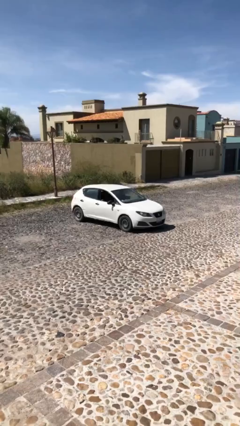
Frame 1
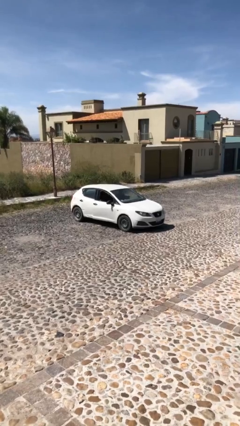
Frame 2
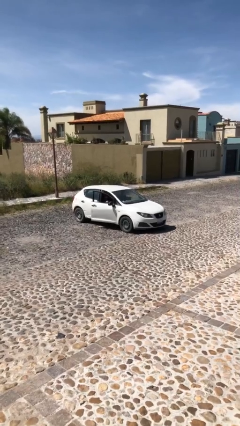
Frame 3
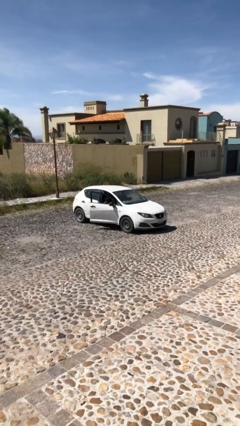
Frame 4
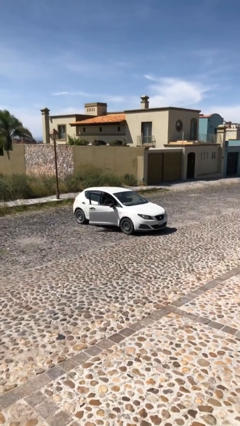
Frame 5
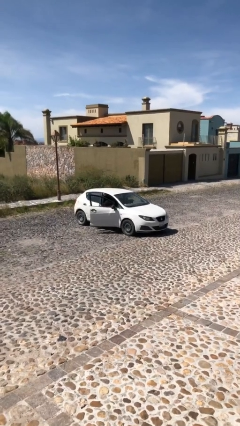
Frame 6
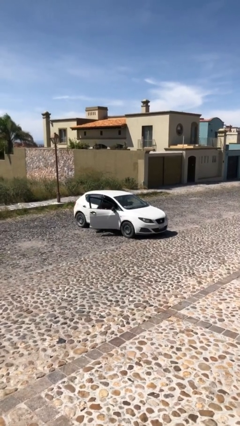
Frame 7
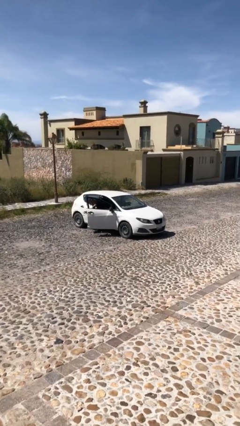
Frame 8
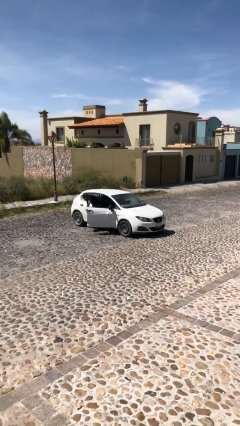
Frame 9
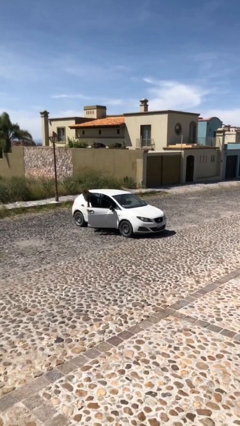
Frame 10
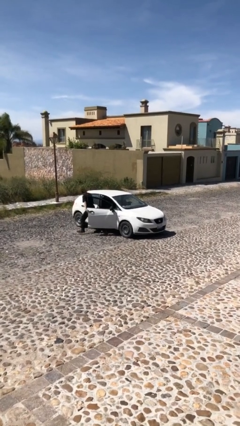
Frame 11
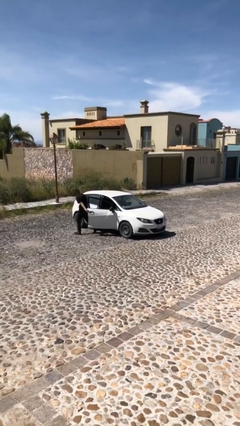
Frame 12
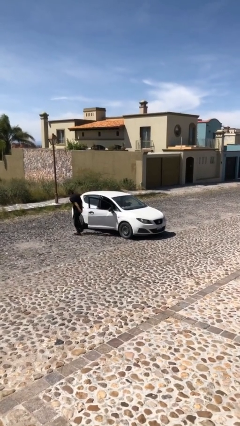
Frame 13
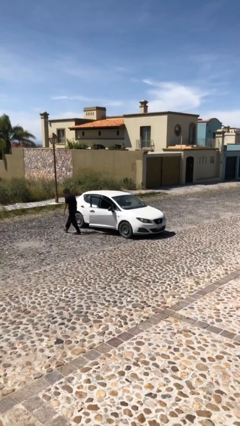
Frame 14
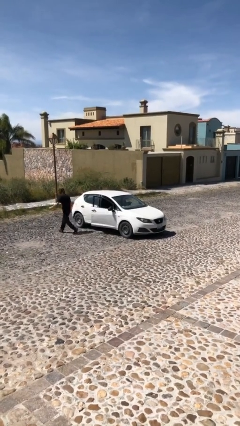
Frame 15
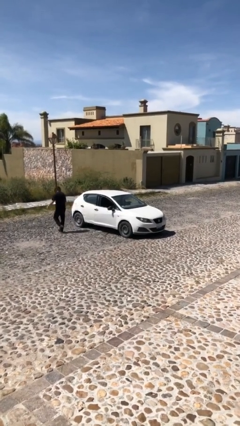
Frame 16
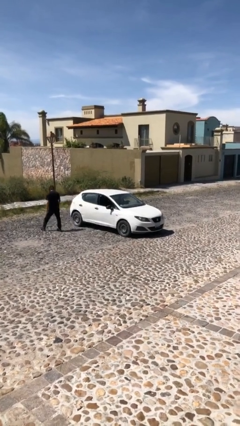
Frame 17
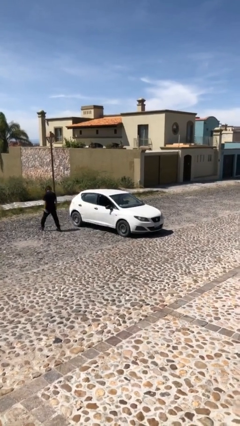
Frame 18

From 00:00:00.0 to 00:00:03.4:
car drops off person

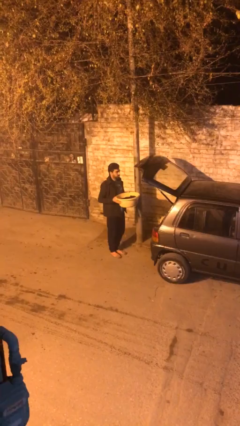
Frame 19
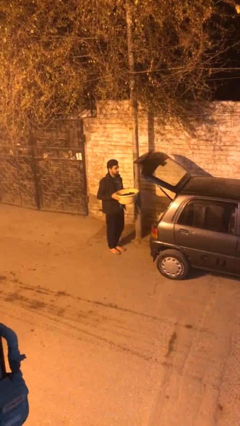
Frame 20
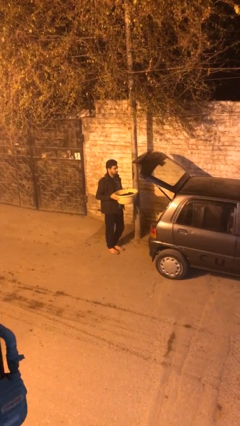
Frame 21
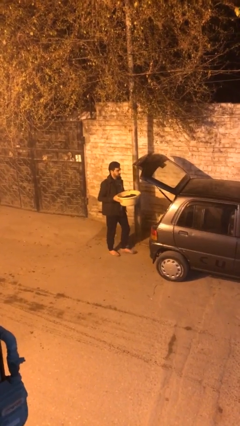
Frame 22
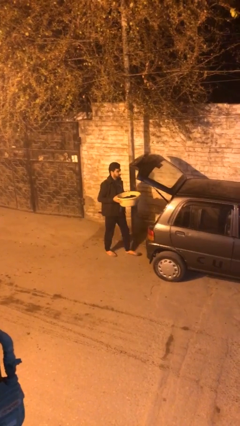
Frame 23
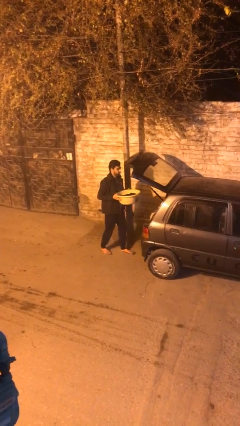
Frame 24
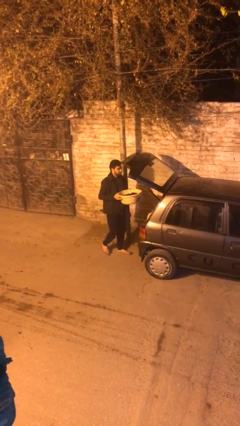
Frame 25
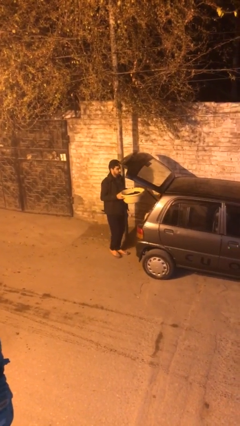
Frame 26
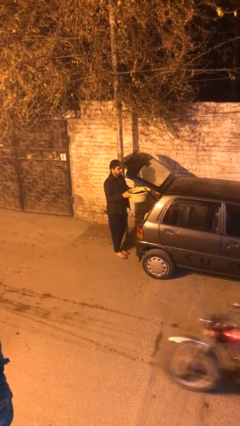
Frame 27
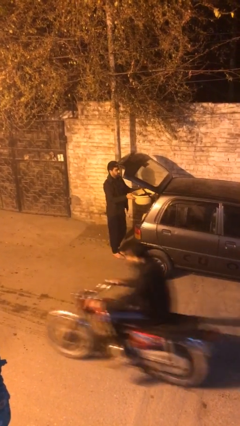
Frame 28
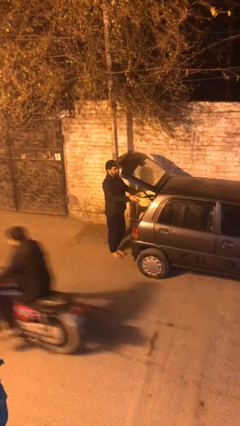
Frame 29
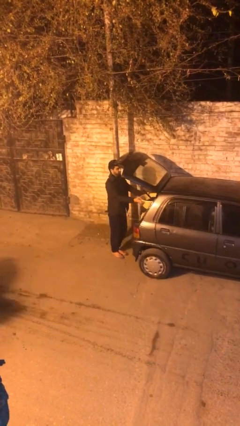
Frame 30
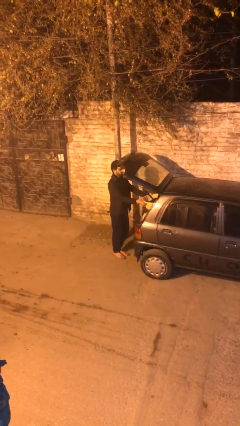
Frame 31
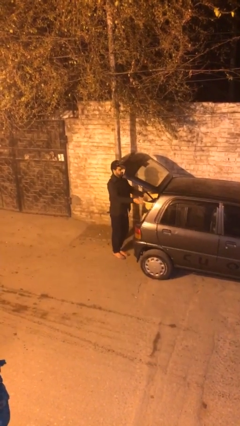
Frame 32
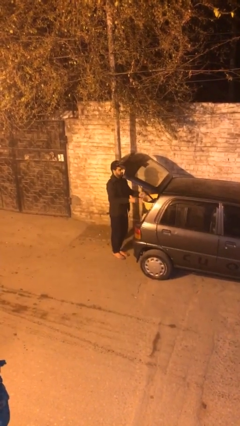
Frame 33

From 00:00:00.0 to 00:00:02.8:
person loads car

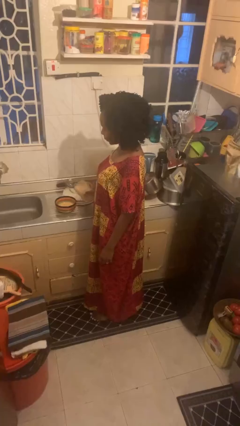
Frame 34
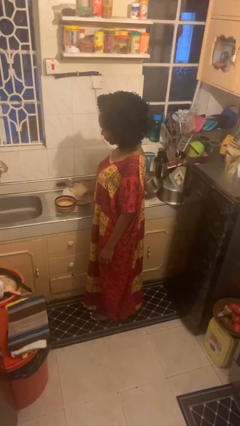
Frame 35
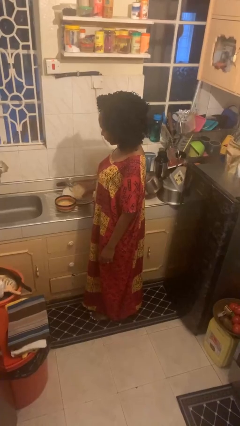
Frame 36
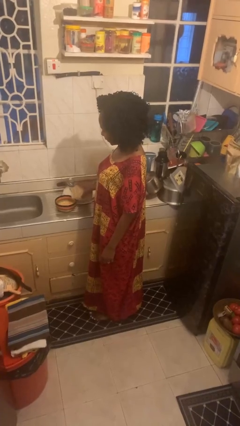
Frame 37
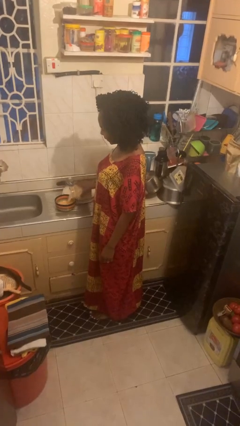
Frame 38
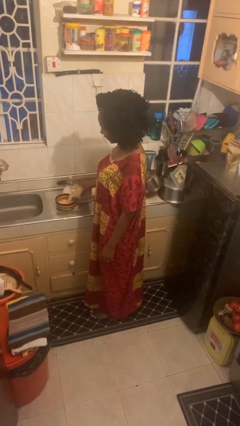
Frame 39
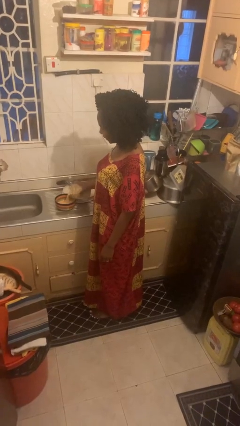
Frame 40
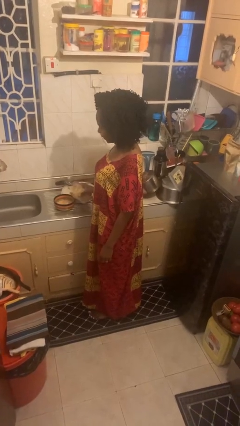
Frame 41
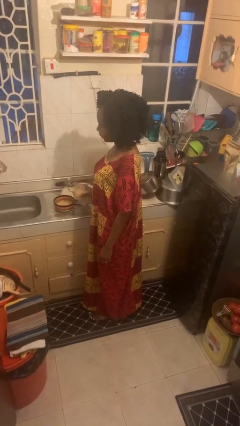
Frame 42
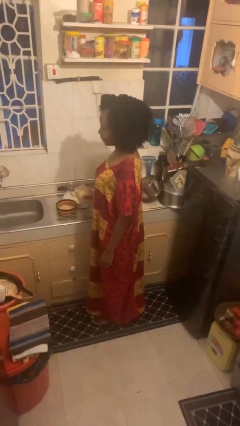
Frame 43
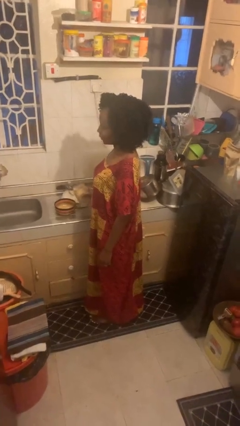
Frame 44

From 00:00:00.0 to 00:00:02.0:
person pours into bowl

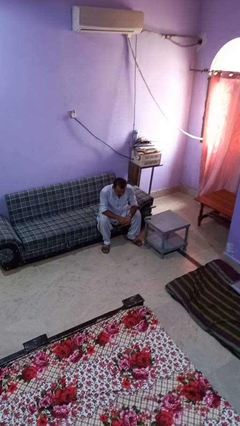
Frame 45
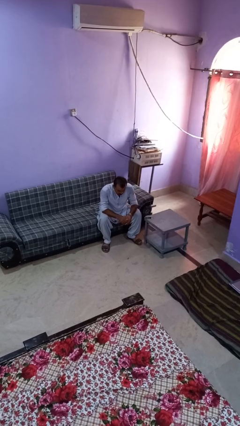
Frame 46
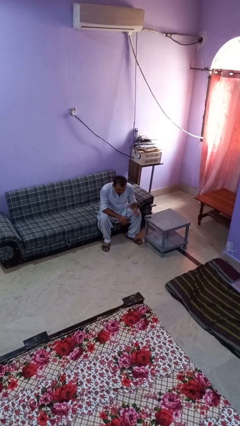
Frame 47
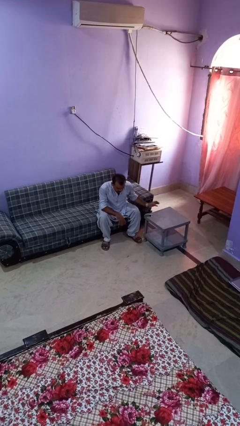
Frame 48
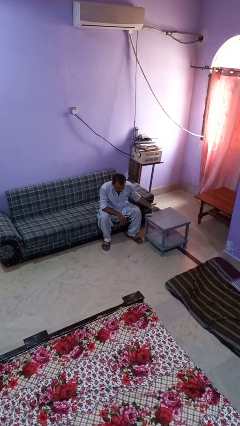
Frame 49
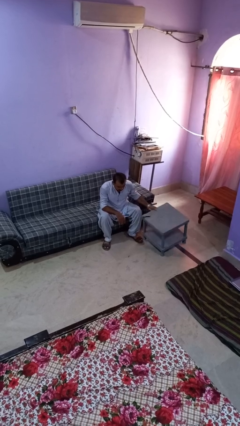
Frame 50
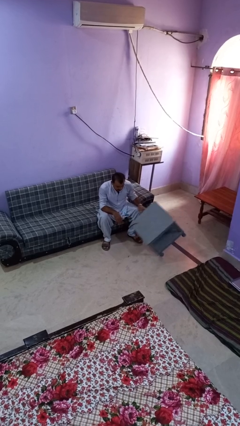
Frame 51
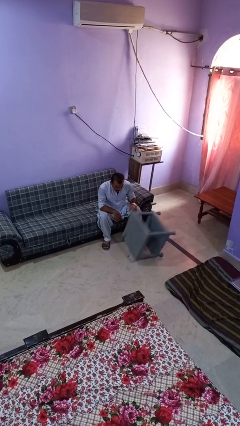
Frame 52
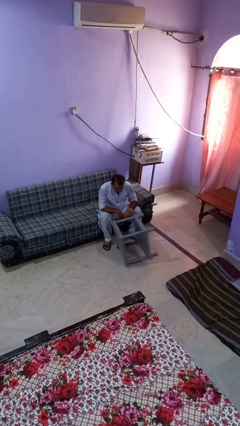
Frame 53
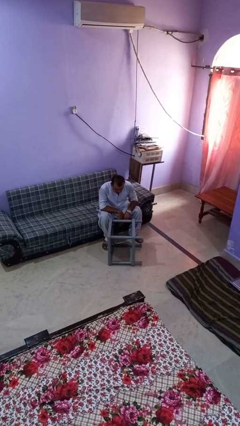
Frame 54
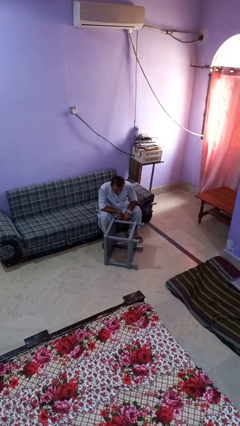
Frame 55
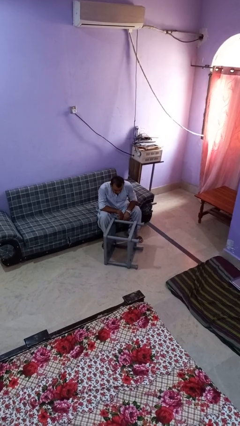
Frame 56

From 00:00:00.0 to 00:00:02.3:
person knocks over furniture

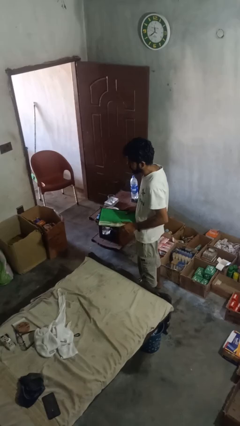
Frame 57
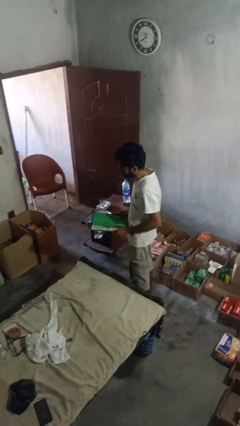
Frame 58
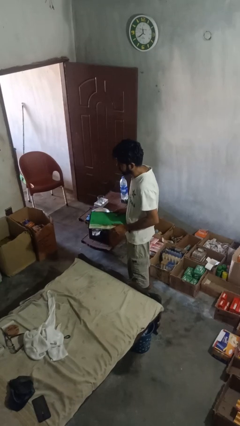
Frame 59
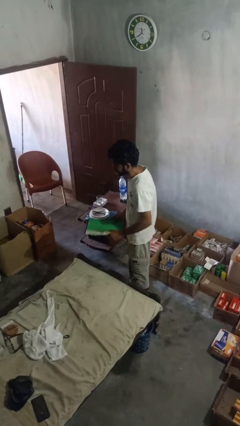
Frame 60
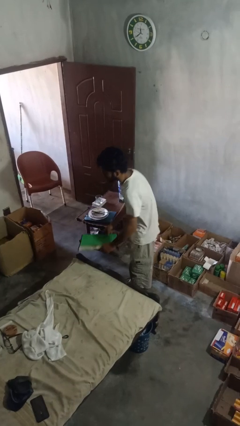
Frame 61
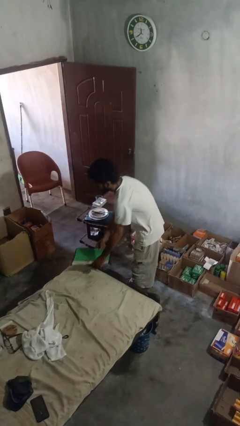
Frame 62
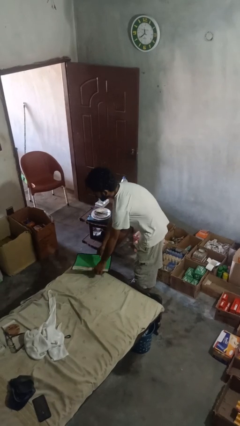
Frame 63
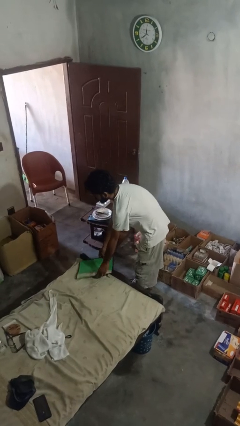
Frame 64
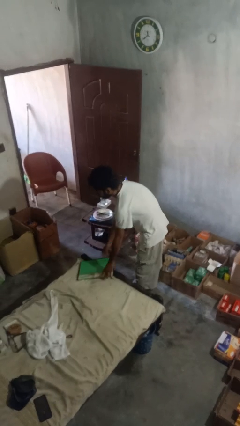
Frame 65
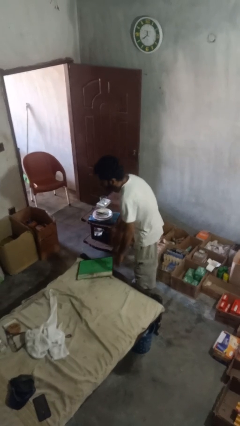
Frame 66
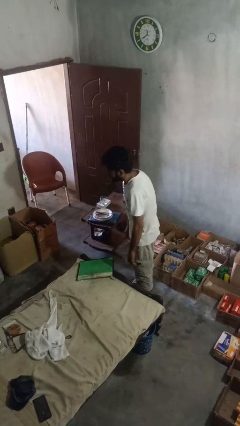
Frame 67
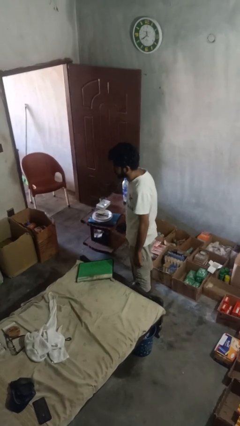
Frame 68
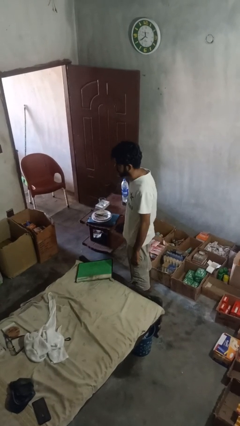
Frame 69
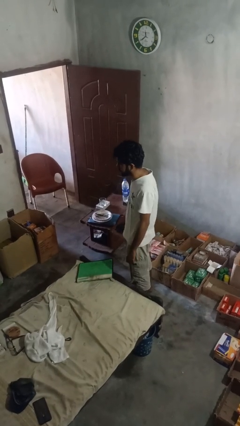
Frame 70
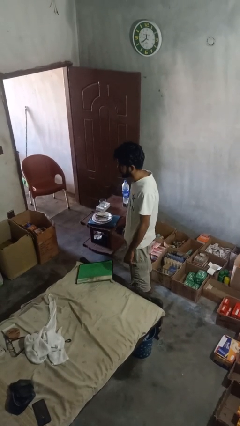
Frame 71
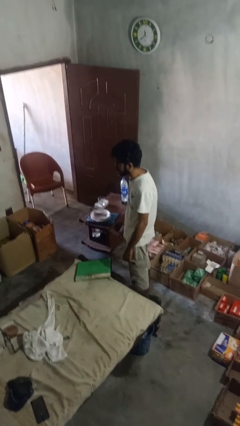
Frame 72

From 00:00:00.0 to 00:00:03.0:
person picks up object from bed

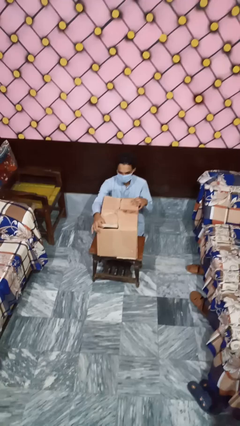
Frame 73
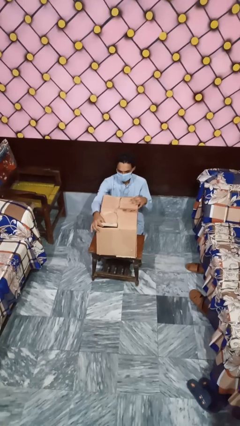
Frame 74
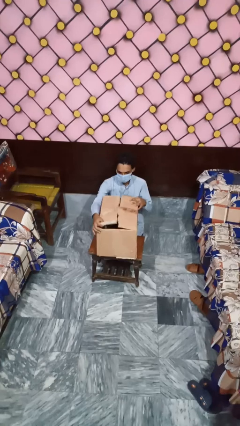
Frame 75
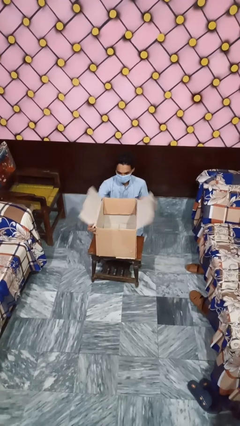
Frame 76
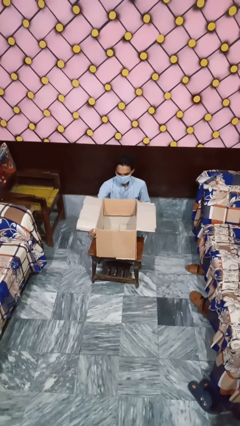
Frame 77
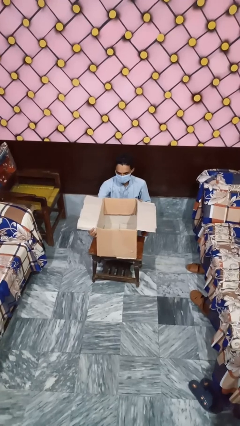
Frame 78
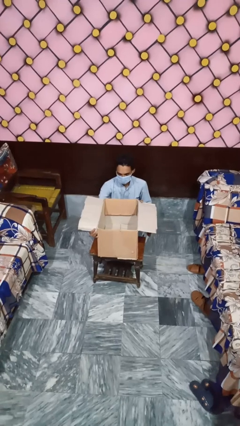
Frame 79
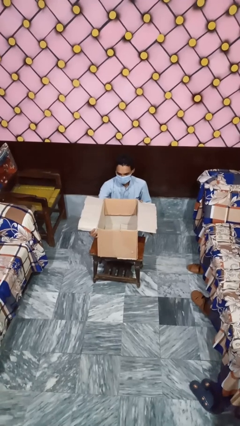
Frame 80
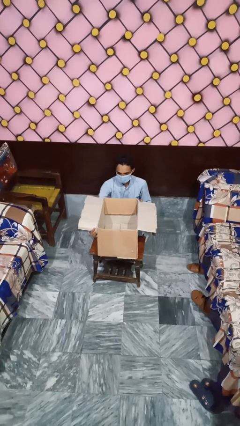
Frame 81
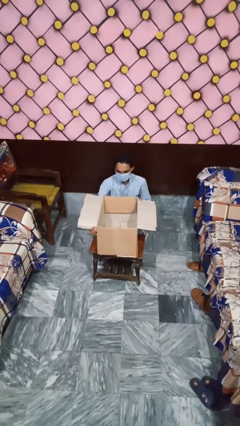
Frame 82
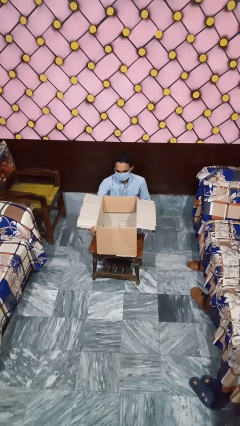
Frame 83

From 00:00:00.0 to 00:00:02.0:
person opens box

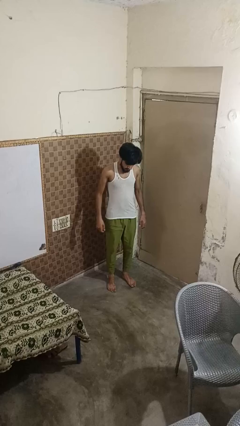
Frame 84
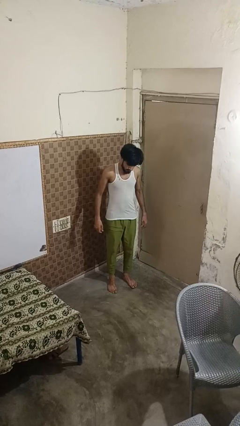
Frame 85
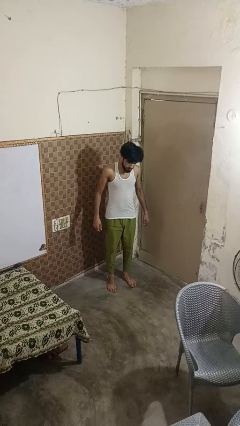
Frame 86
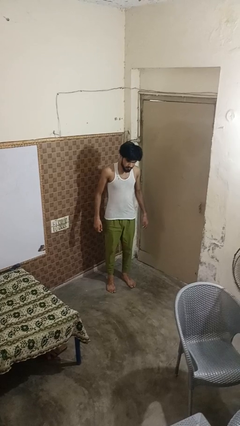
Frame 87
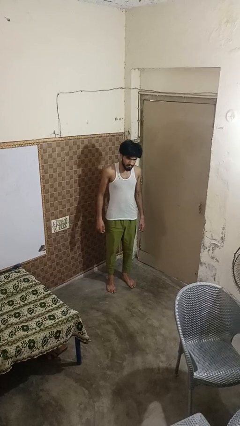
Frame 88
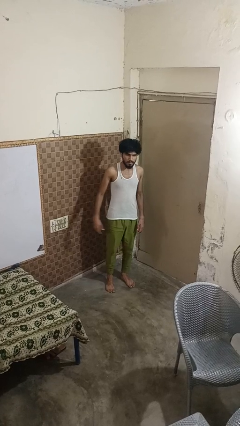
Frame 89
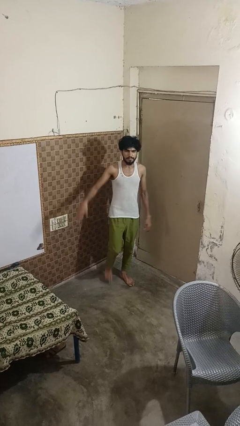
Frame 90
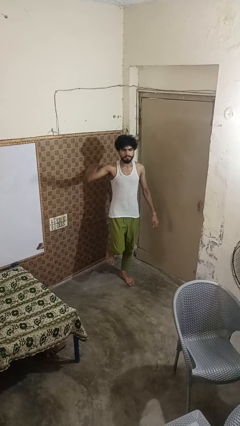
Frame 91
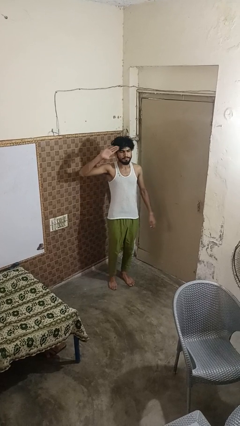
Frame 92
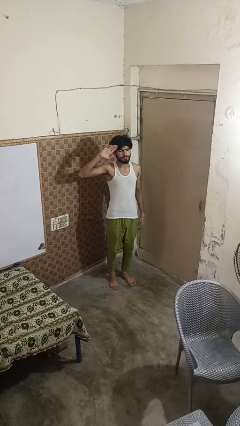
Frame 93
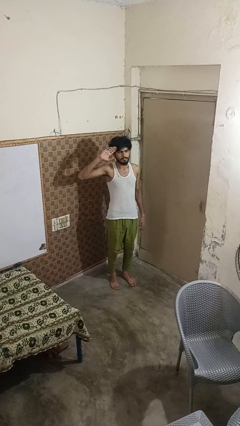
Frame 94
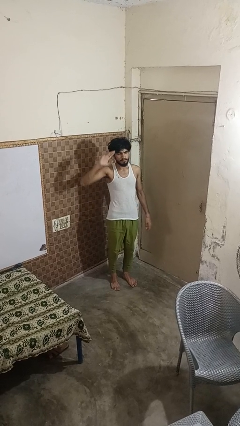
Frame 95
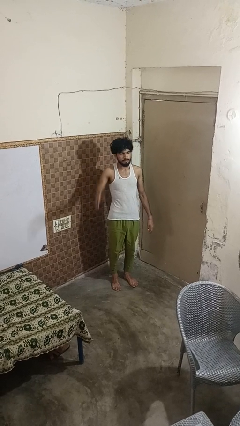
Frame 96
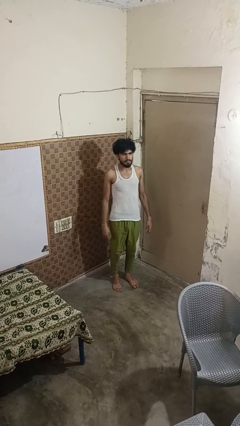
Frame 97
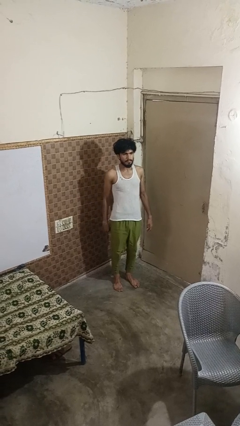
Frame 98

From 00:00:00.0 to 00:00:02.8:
person salutes
